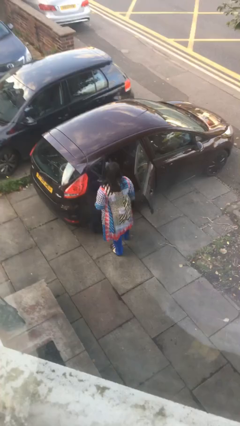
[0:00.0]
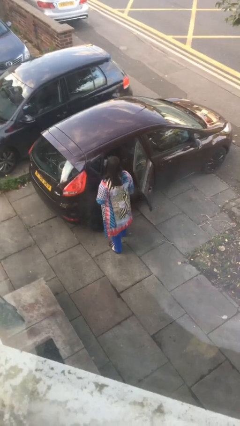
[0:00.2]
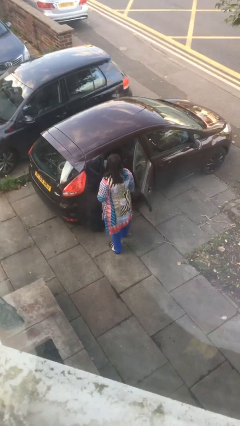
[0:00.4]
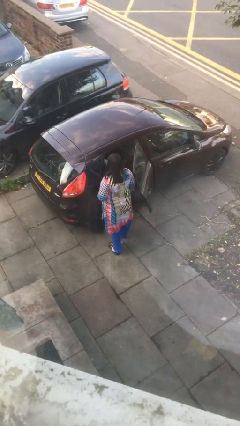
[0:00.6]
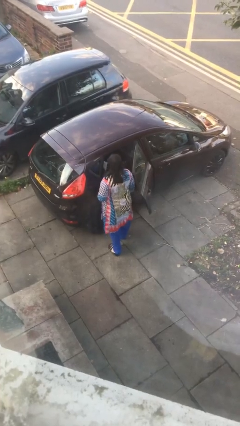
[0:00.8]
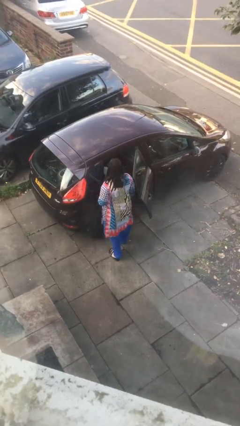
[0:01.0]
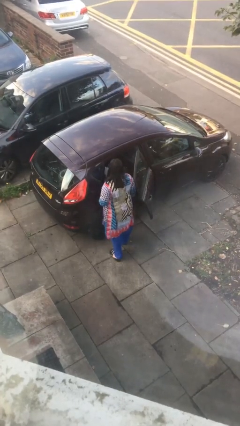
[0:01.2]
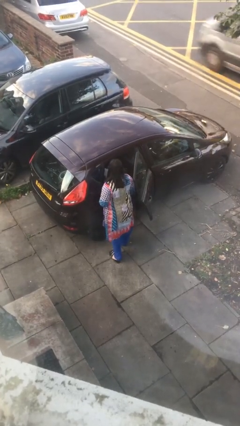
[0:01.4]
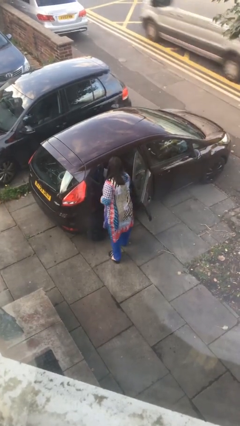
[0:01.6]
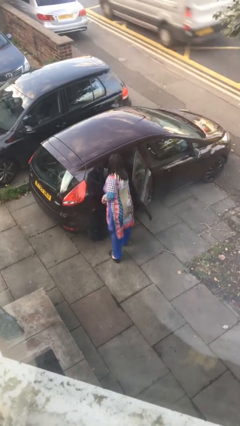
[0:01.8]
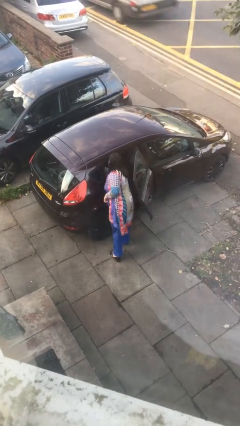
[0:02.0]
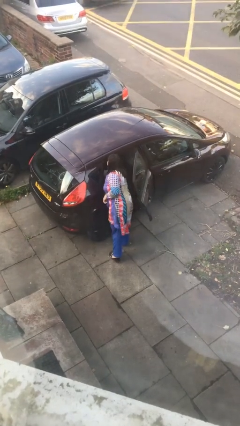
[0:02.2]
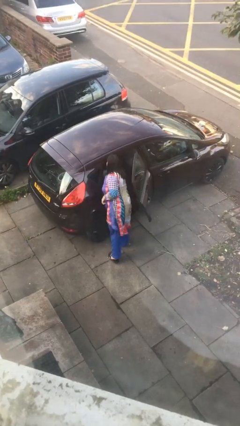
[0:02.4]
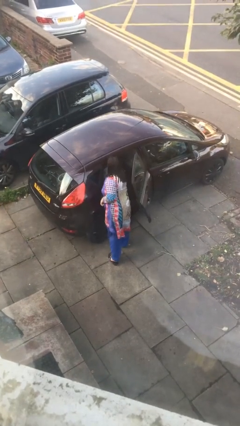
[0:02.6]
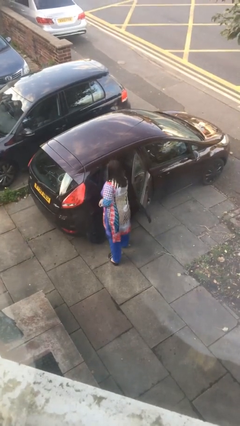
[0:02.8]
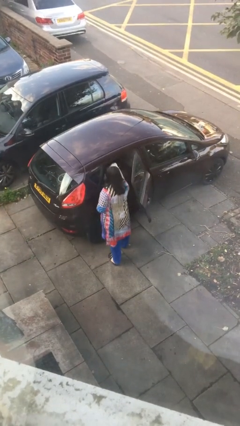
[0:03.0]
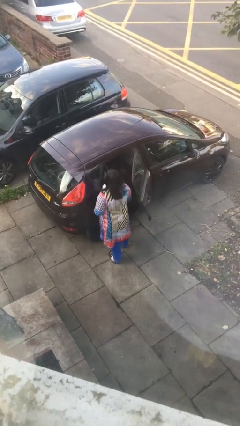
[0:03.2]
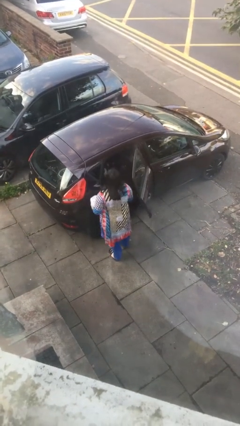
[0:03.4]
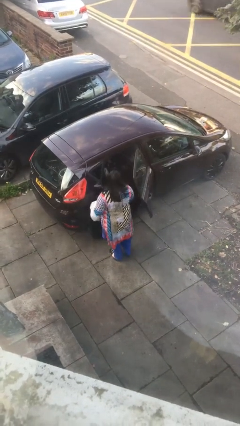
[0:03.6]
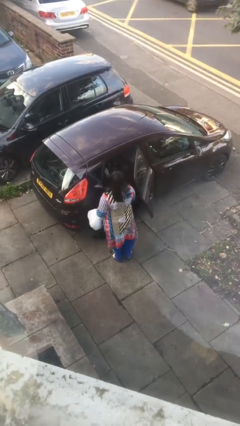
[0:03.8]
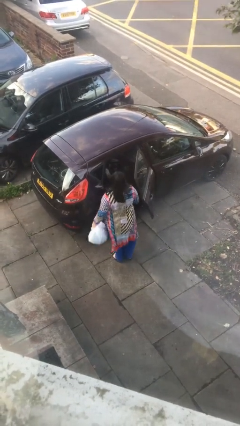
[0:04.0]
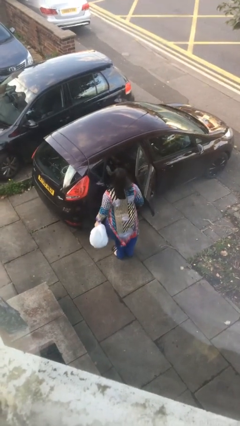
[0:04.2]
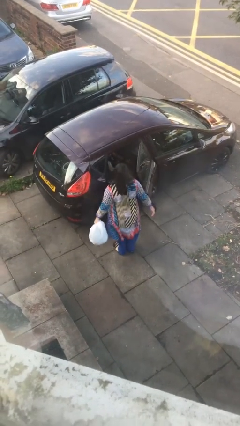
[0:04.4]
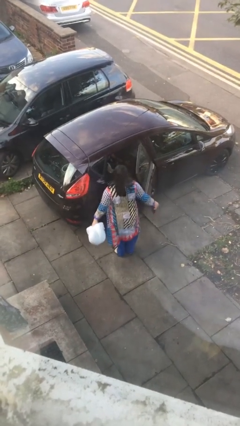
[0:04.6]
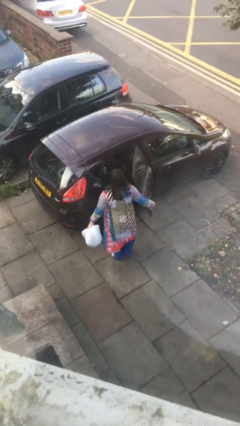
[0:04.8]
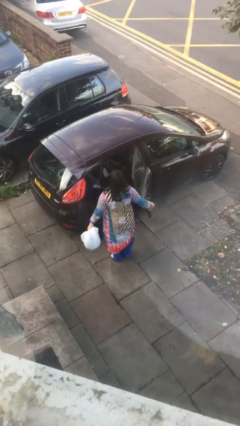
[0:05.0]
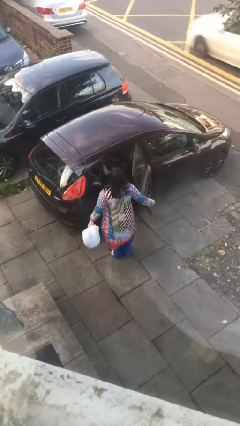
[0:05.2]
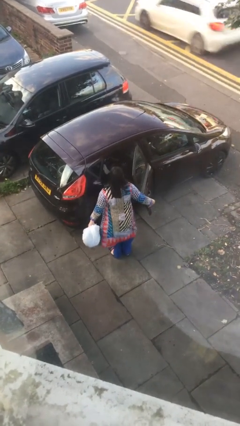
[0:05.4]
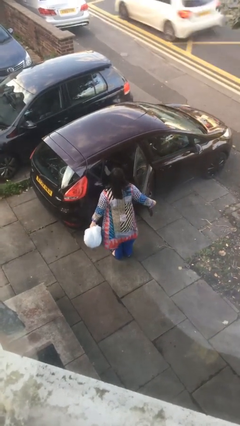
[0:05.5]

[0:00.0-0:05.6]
person unloads car

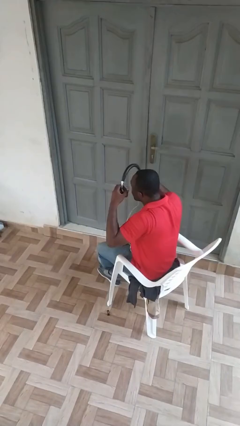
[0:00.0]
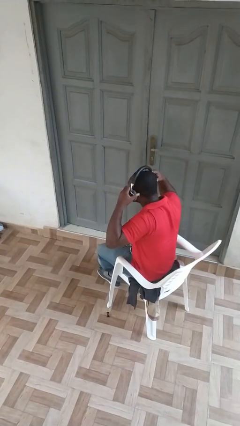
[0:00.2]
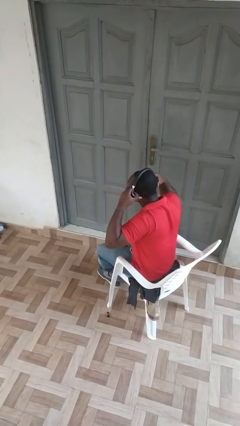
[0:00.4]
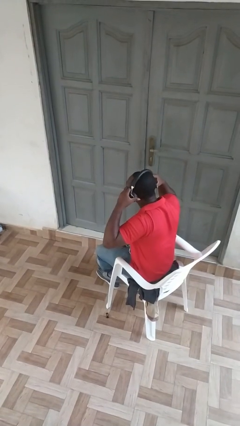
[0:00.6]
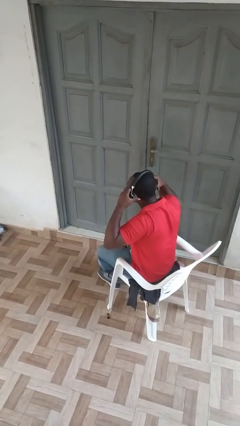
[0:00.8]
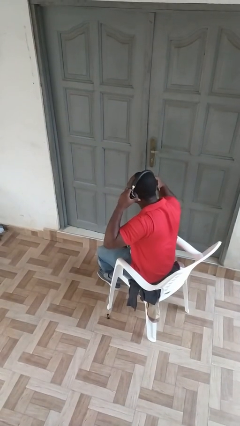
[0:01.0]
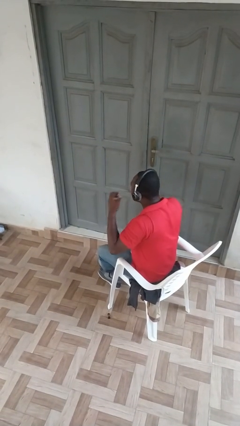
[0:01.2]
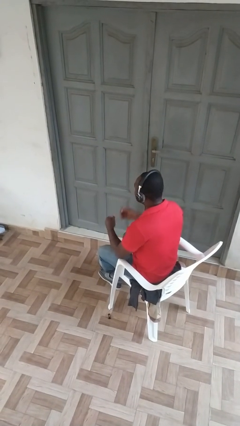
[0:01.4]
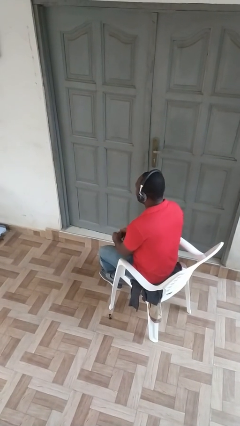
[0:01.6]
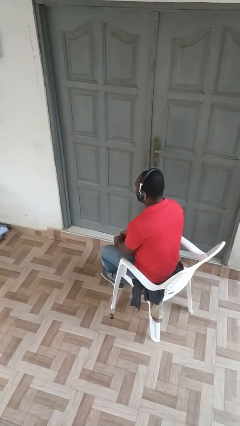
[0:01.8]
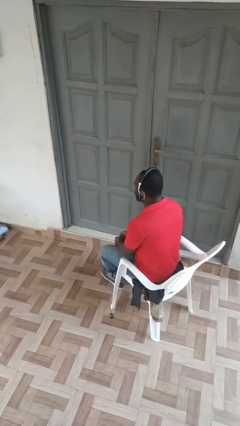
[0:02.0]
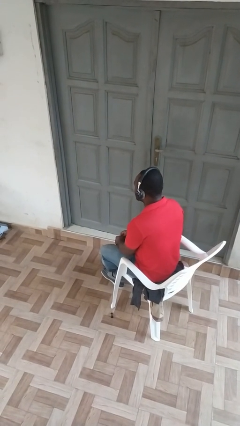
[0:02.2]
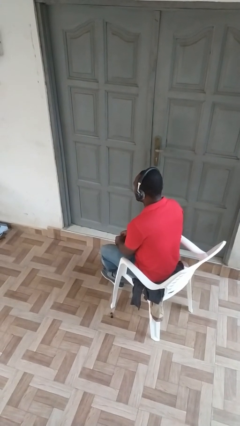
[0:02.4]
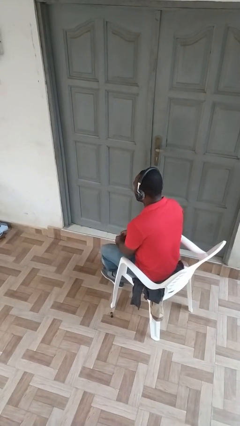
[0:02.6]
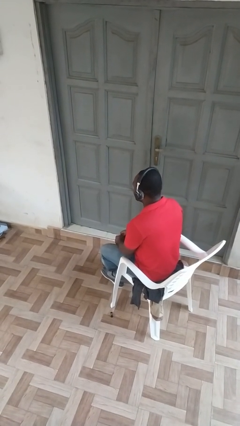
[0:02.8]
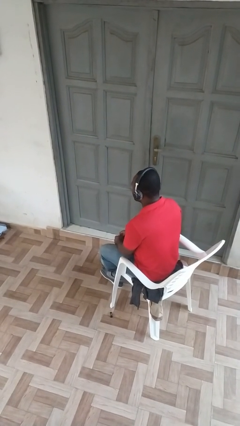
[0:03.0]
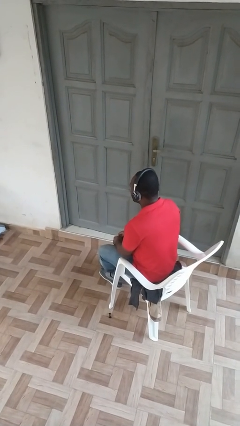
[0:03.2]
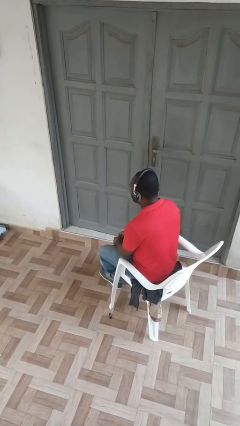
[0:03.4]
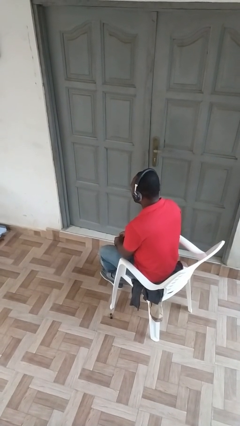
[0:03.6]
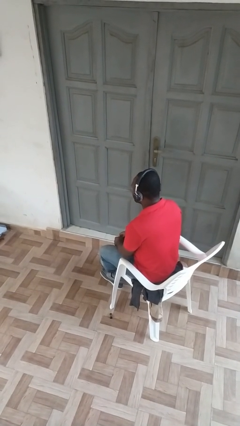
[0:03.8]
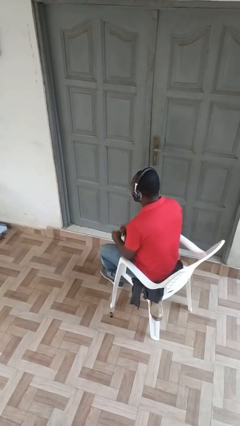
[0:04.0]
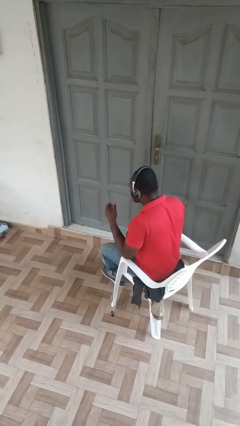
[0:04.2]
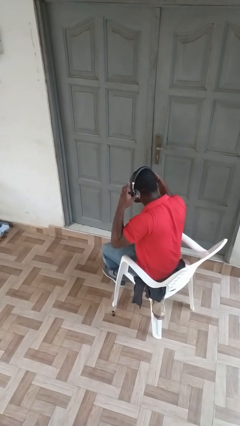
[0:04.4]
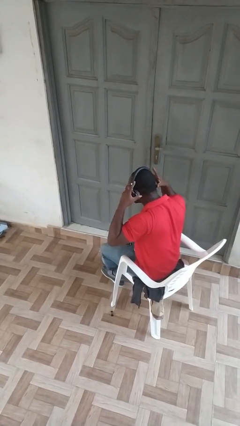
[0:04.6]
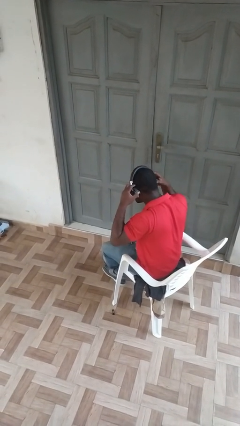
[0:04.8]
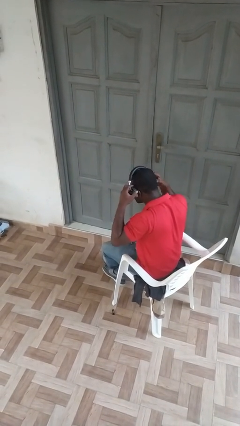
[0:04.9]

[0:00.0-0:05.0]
person puts on headphones

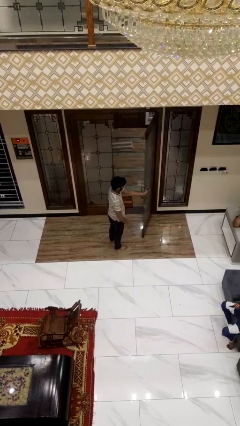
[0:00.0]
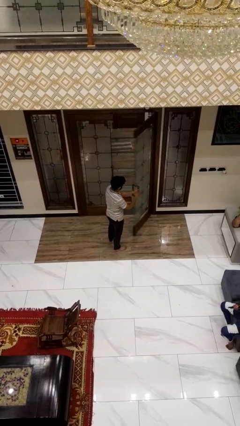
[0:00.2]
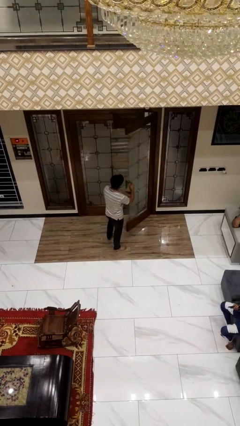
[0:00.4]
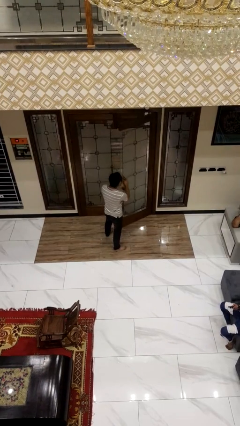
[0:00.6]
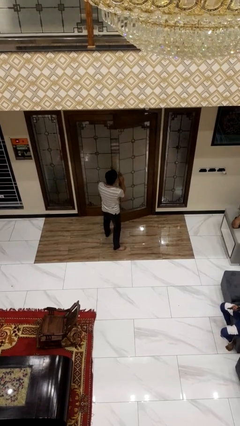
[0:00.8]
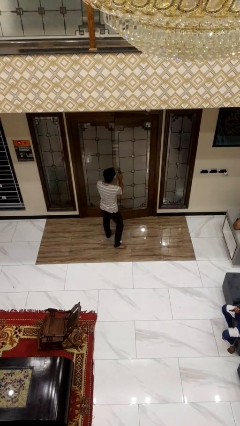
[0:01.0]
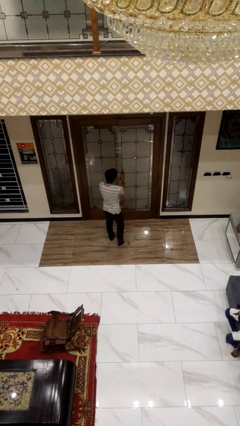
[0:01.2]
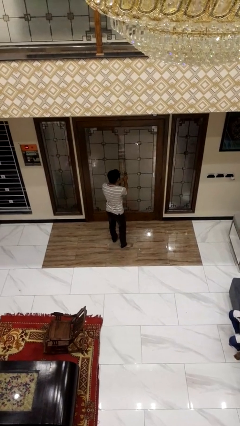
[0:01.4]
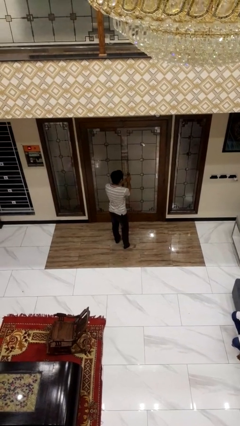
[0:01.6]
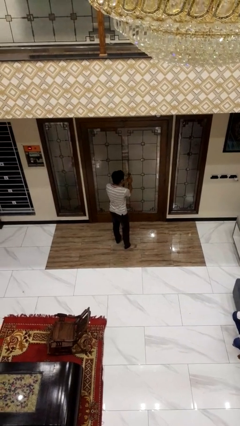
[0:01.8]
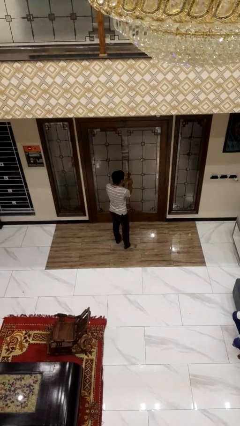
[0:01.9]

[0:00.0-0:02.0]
person closes facility door

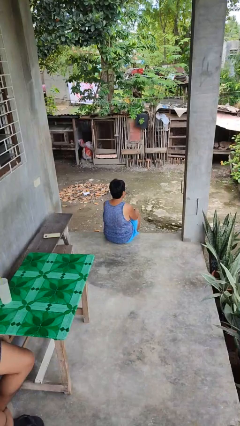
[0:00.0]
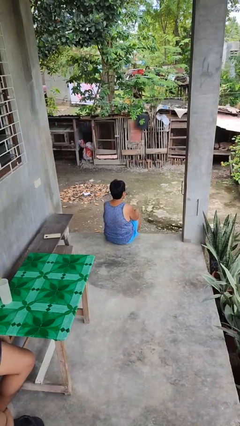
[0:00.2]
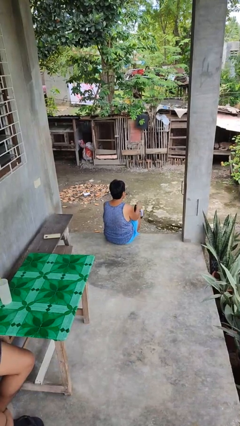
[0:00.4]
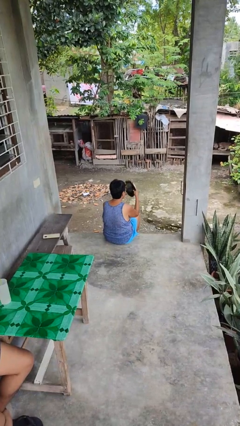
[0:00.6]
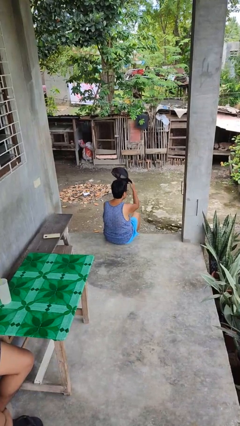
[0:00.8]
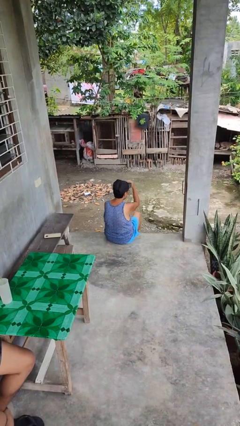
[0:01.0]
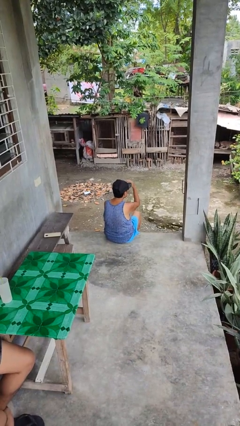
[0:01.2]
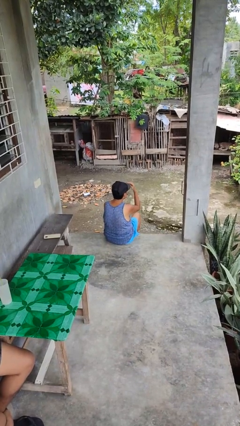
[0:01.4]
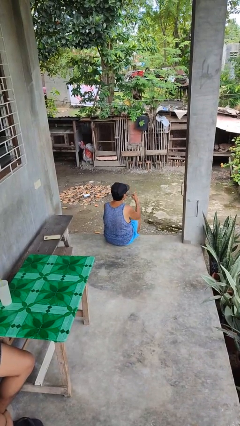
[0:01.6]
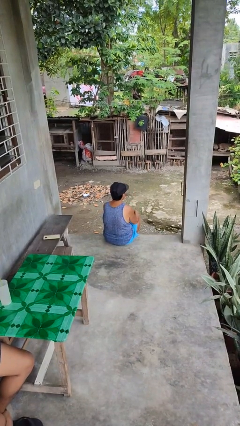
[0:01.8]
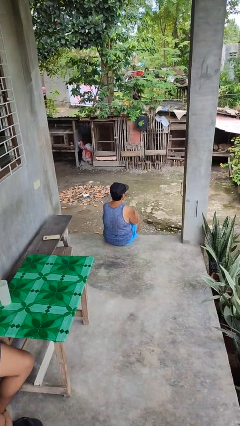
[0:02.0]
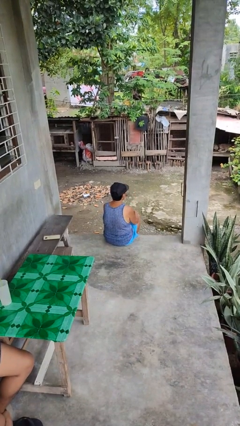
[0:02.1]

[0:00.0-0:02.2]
person puts on hat

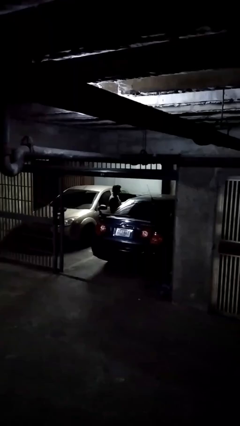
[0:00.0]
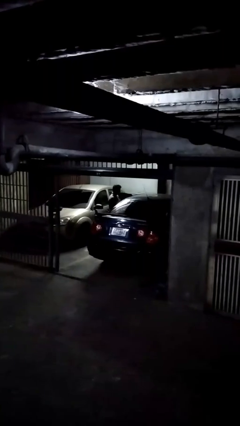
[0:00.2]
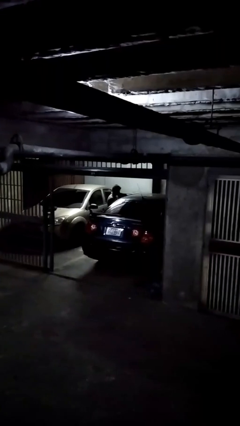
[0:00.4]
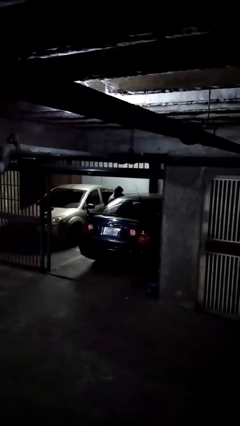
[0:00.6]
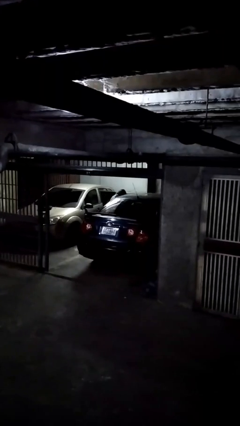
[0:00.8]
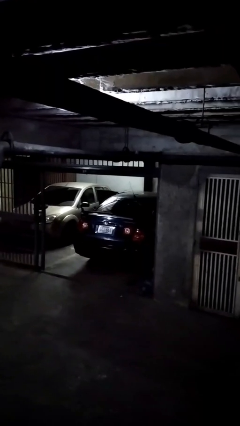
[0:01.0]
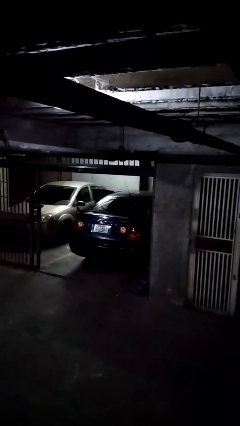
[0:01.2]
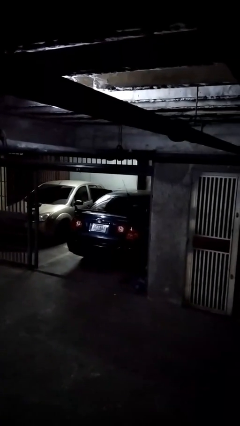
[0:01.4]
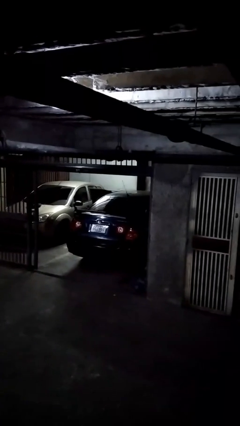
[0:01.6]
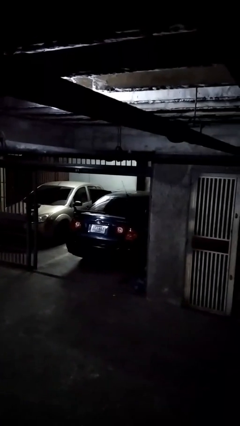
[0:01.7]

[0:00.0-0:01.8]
person loads car

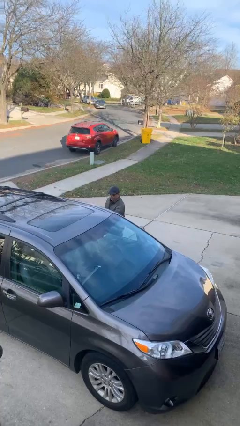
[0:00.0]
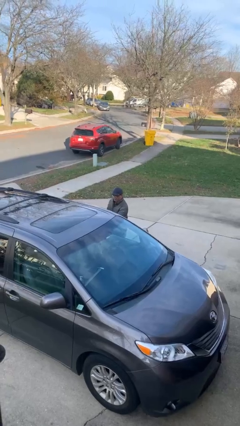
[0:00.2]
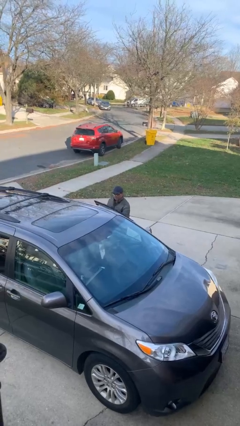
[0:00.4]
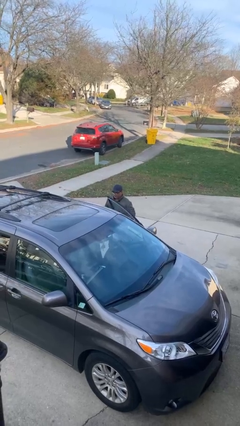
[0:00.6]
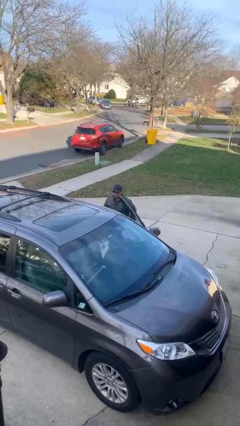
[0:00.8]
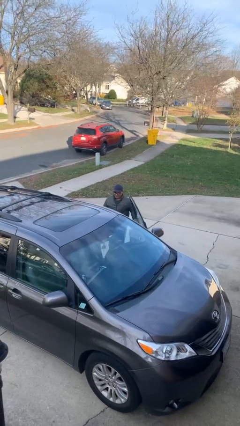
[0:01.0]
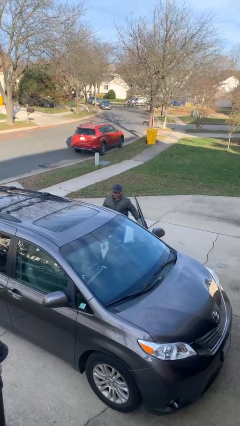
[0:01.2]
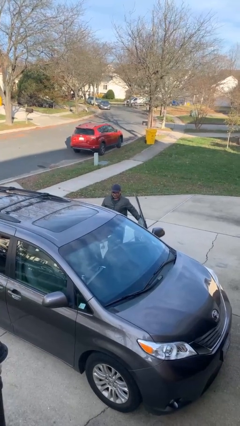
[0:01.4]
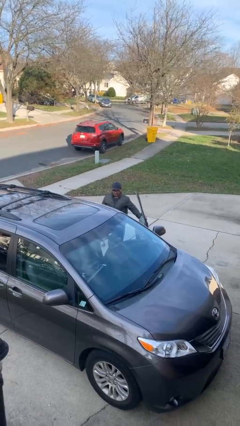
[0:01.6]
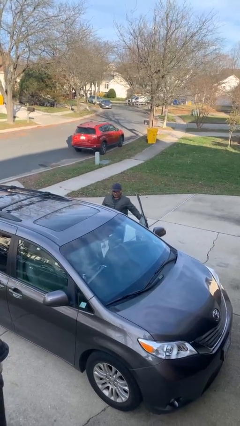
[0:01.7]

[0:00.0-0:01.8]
person opens car door
